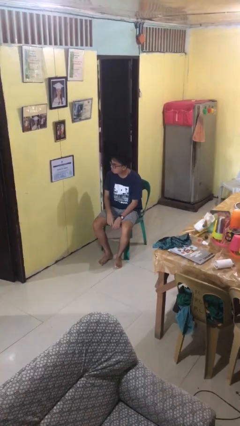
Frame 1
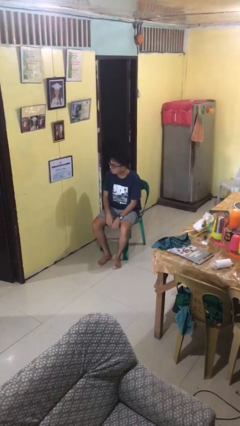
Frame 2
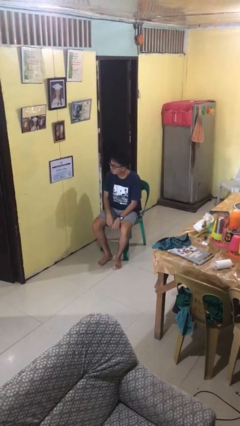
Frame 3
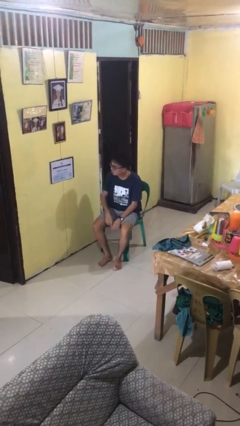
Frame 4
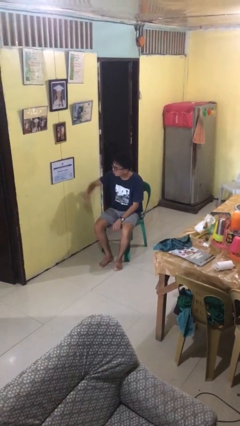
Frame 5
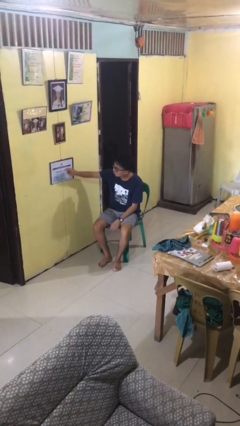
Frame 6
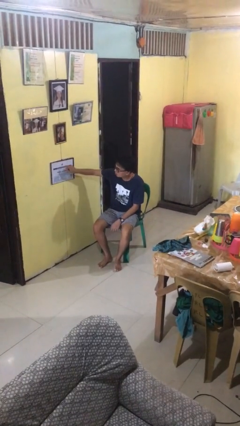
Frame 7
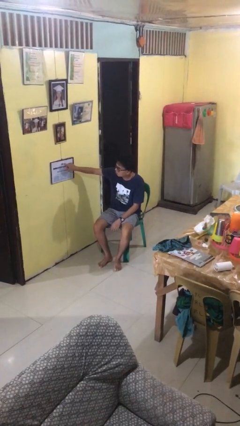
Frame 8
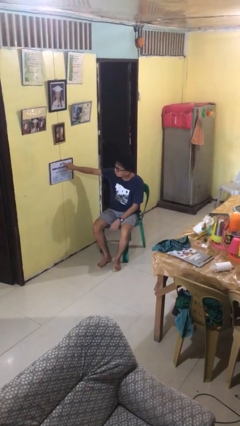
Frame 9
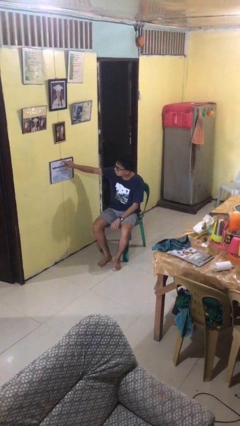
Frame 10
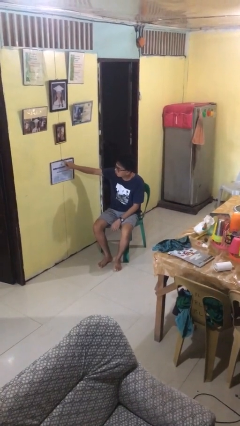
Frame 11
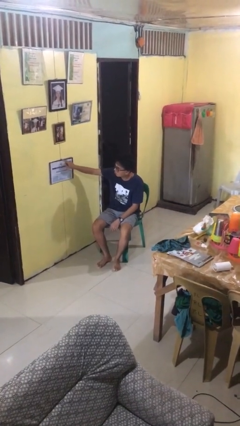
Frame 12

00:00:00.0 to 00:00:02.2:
person taps object with finger

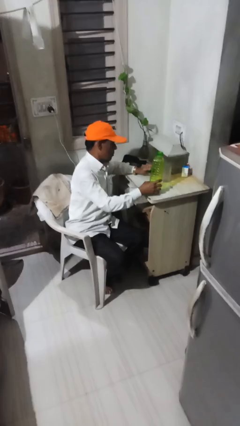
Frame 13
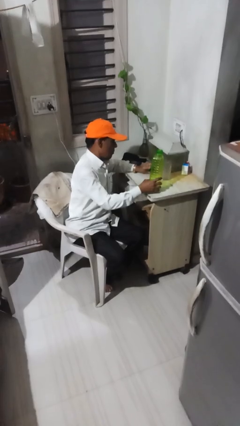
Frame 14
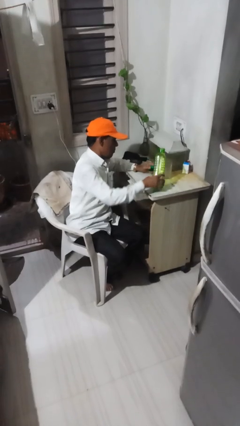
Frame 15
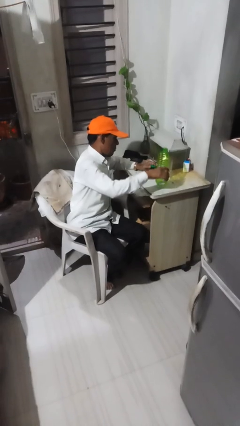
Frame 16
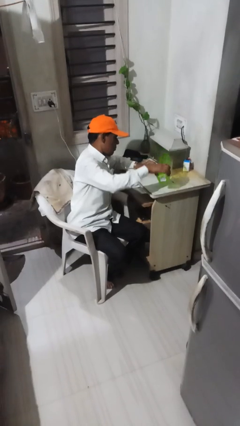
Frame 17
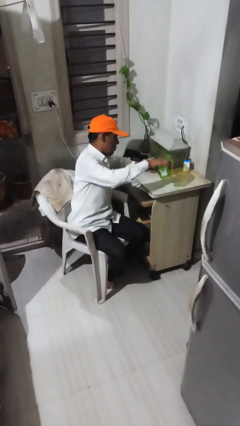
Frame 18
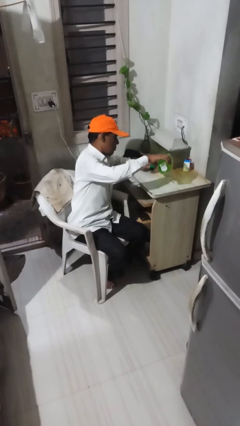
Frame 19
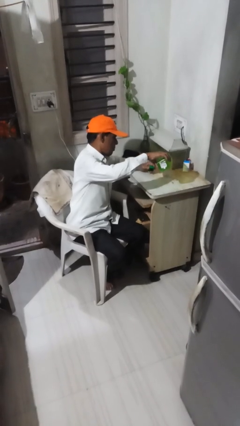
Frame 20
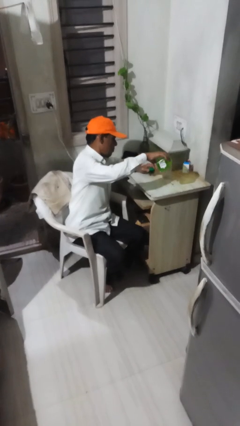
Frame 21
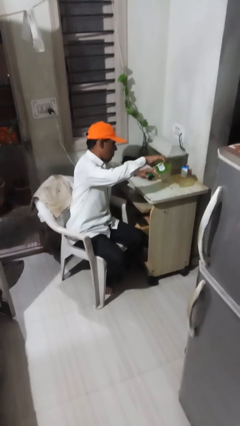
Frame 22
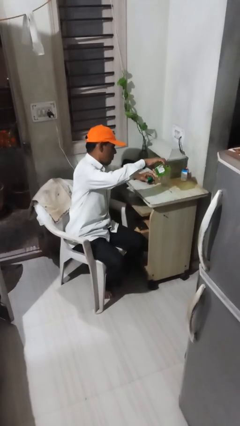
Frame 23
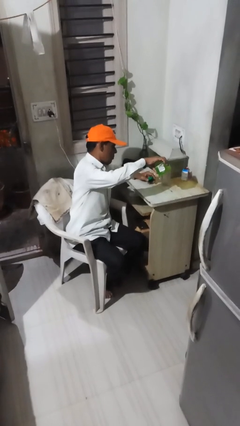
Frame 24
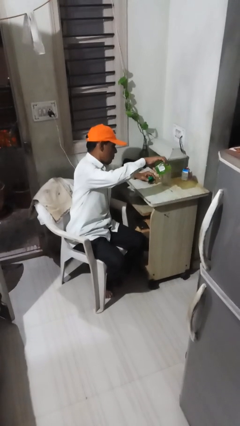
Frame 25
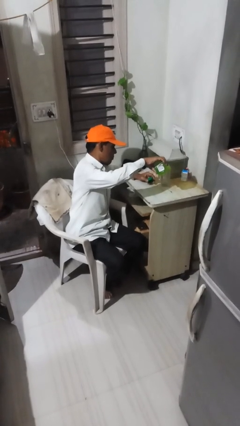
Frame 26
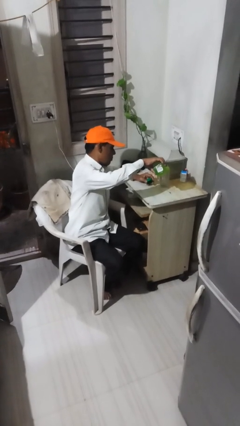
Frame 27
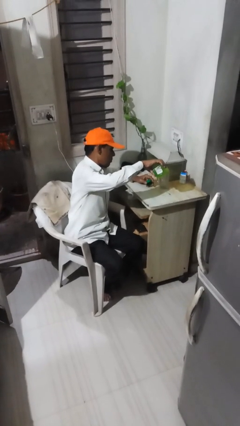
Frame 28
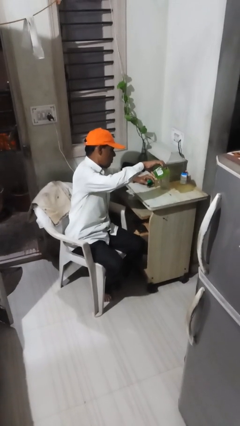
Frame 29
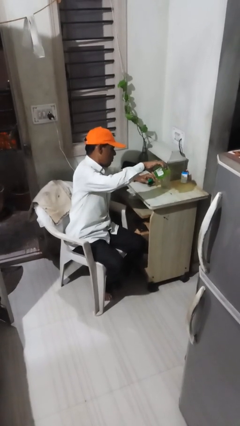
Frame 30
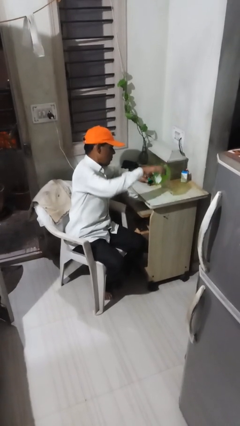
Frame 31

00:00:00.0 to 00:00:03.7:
person pours liquid into cup

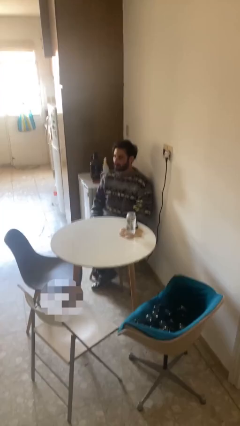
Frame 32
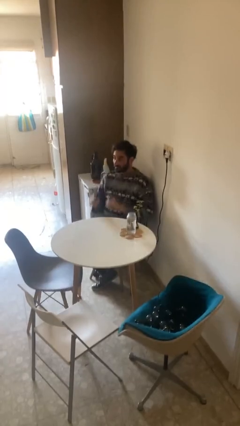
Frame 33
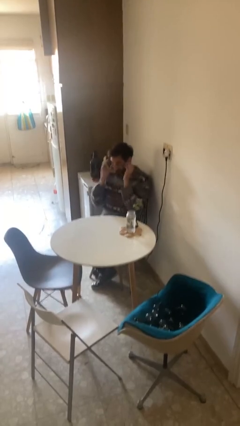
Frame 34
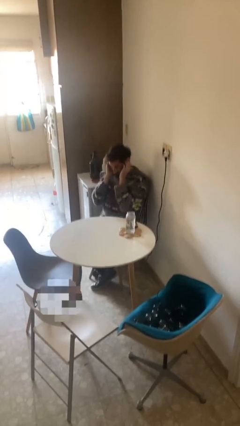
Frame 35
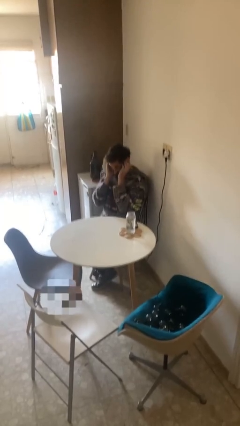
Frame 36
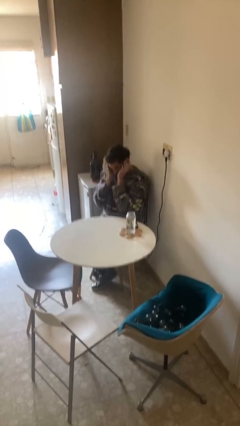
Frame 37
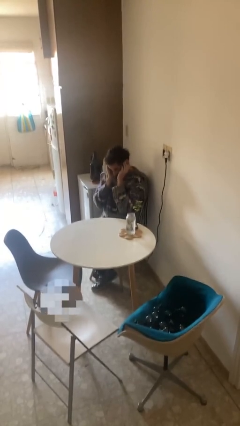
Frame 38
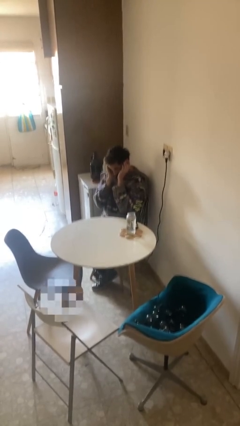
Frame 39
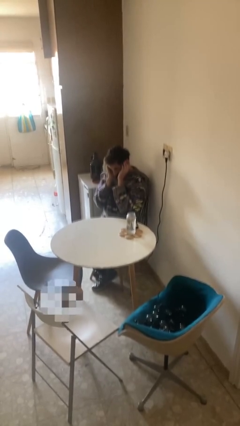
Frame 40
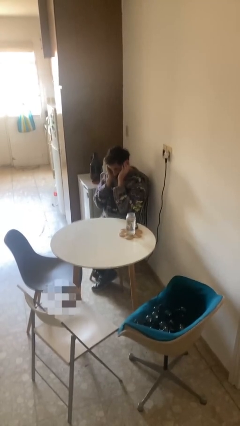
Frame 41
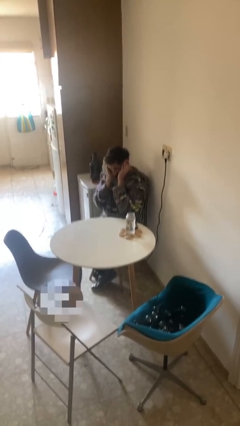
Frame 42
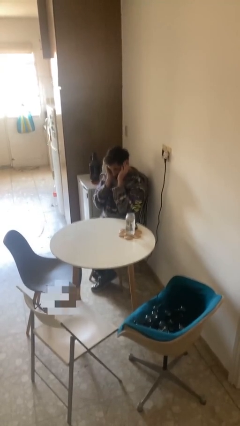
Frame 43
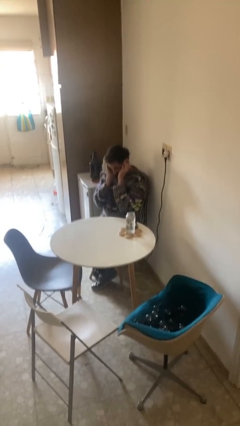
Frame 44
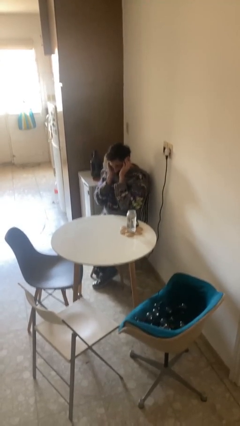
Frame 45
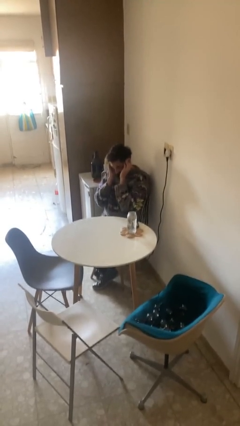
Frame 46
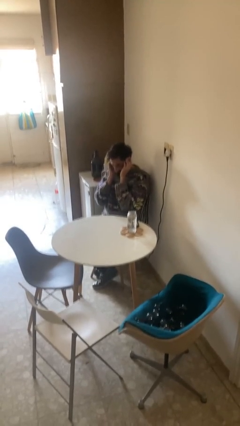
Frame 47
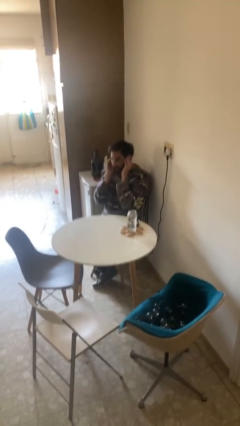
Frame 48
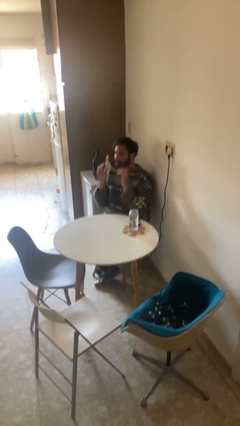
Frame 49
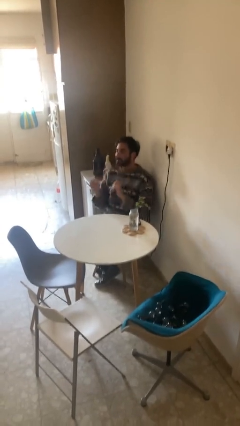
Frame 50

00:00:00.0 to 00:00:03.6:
person puts fingers in ear

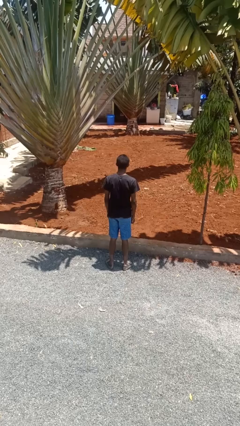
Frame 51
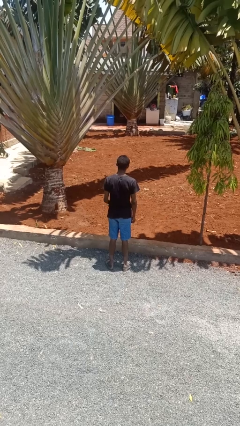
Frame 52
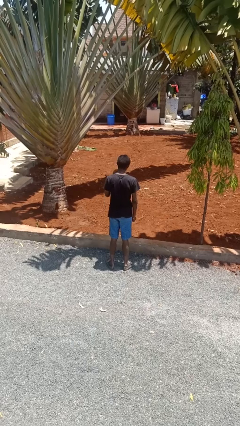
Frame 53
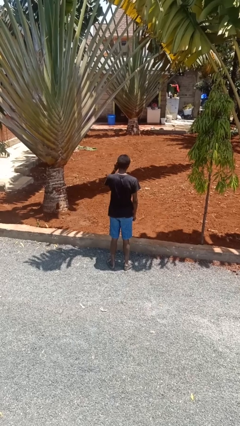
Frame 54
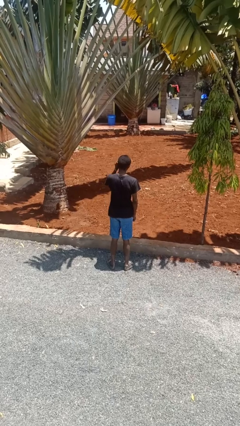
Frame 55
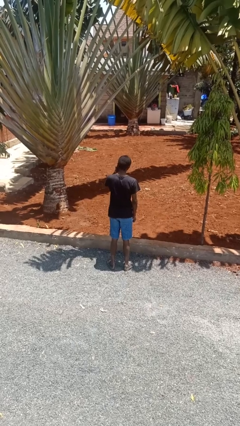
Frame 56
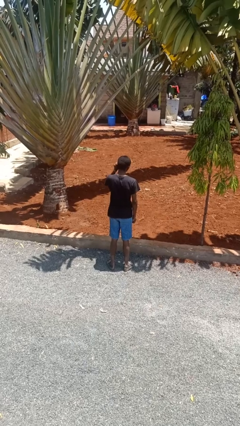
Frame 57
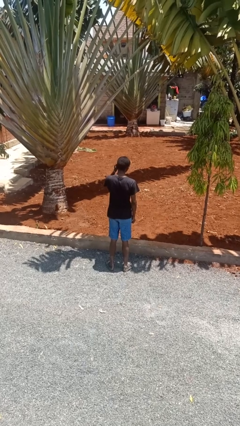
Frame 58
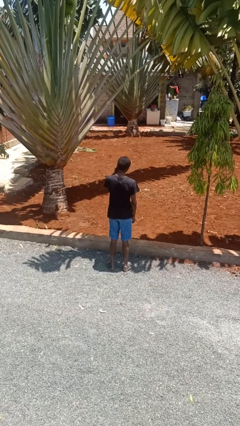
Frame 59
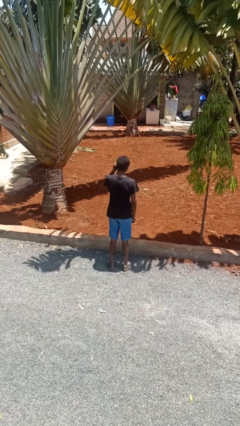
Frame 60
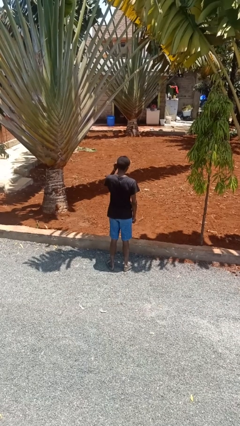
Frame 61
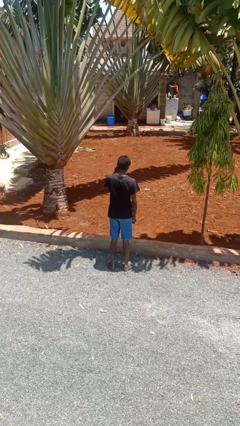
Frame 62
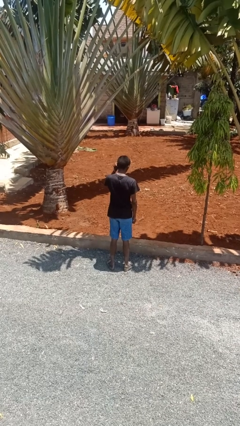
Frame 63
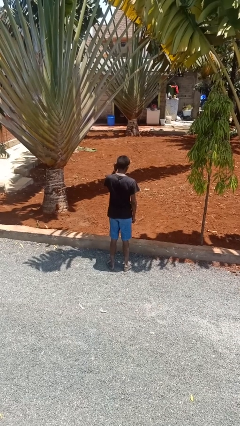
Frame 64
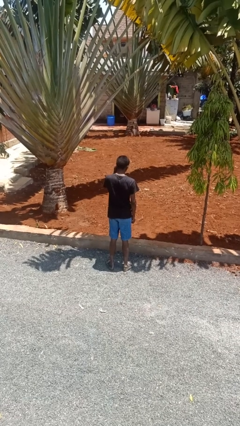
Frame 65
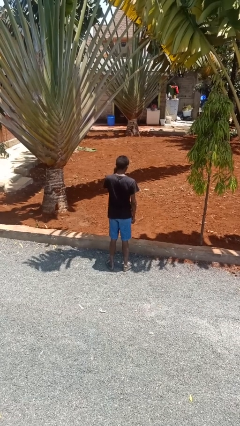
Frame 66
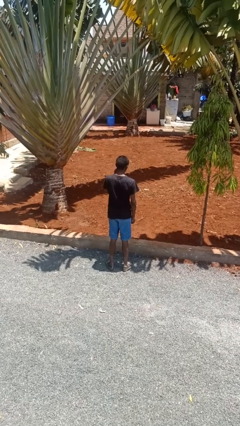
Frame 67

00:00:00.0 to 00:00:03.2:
person touches earlobe

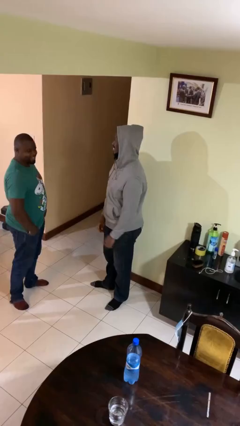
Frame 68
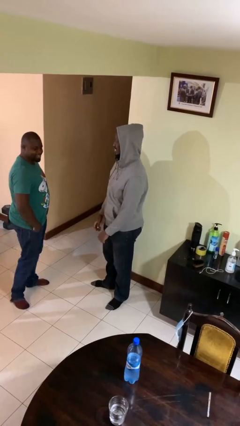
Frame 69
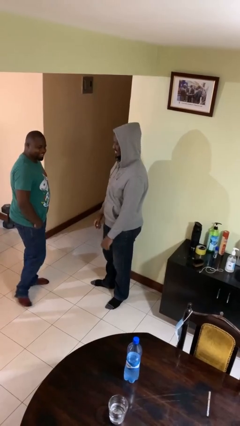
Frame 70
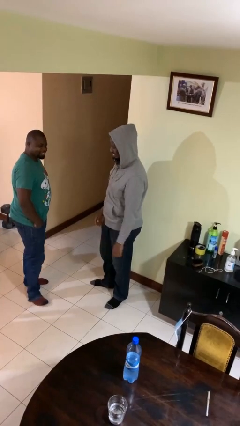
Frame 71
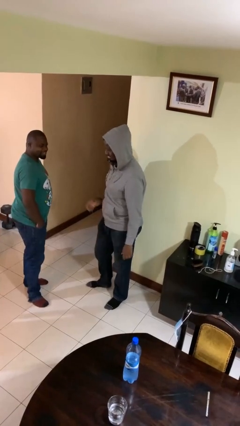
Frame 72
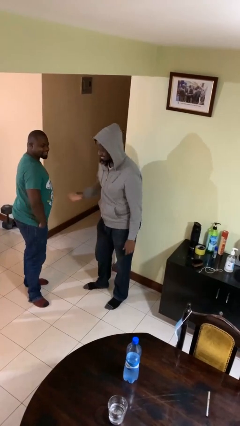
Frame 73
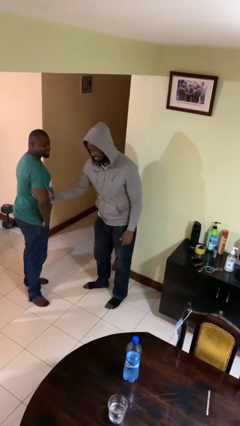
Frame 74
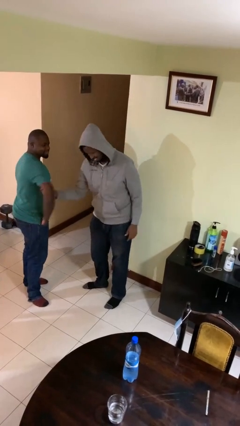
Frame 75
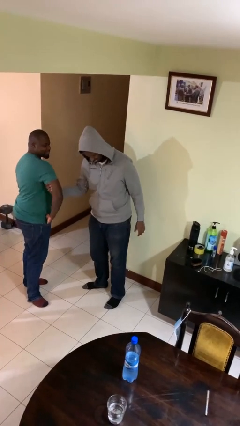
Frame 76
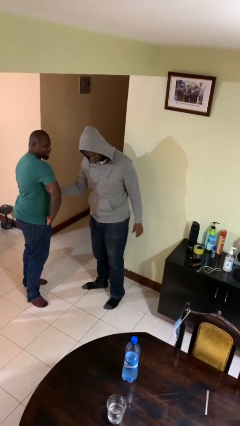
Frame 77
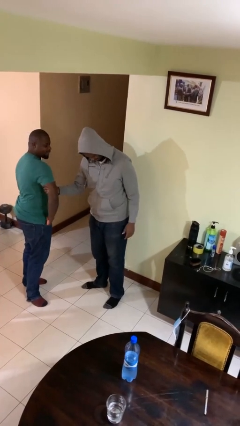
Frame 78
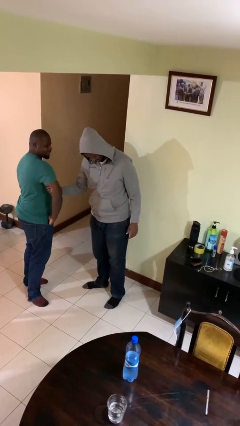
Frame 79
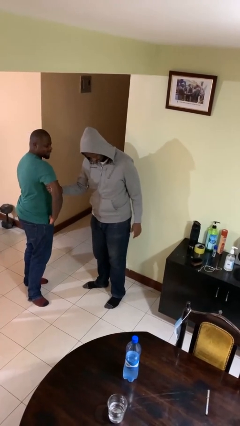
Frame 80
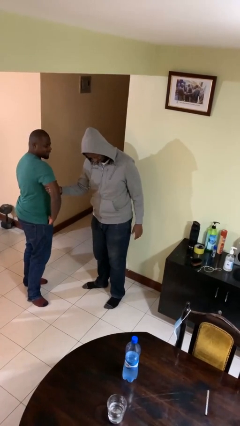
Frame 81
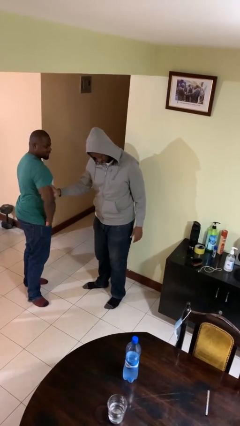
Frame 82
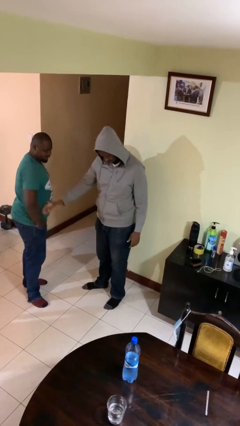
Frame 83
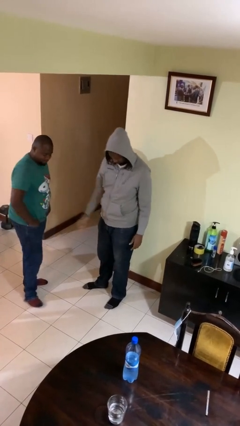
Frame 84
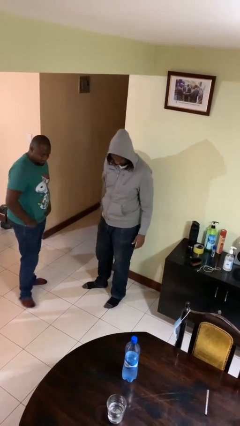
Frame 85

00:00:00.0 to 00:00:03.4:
person grabs person by bicep

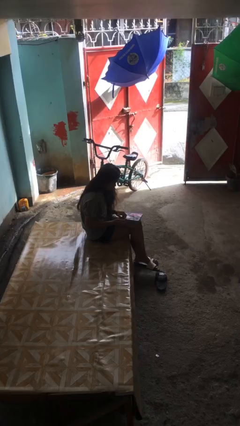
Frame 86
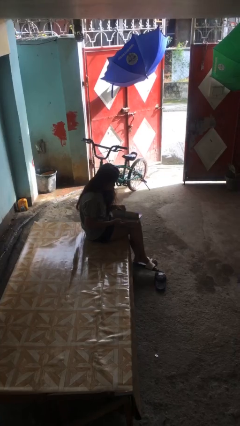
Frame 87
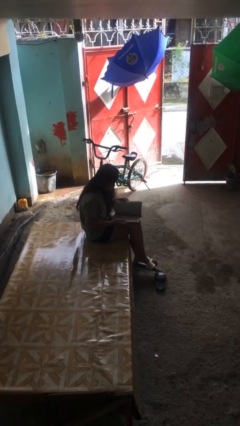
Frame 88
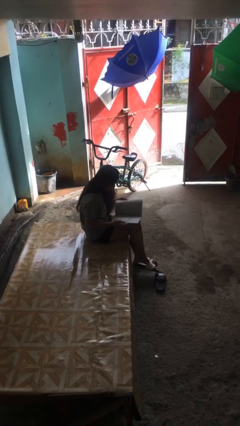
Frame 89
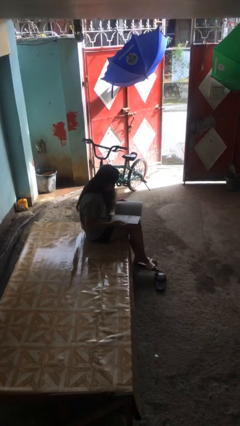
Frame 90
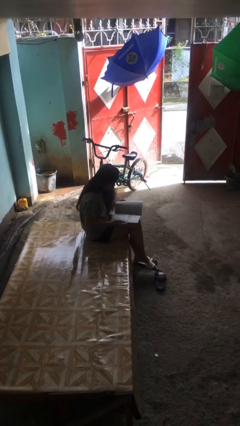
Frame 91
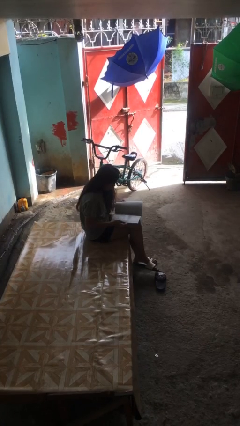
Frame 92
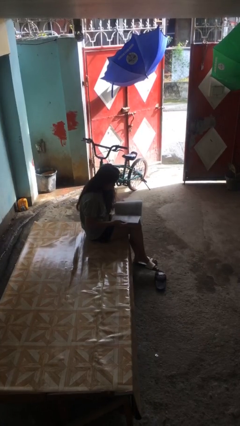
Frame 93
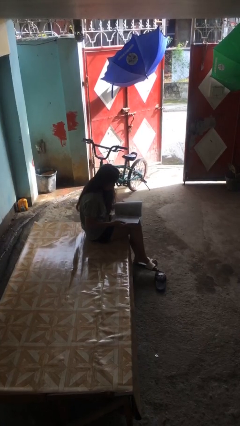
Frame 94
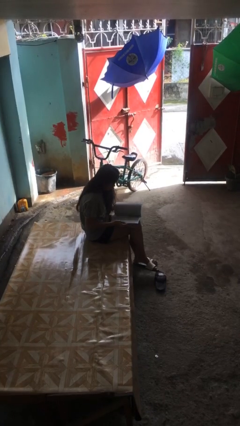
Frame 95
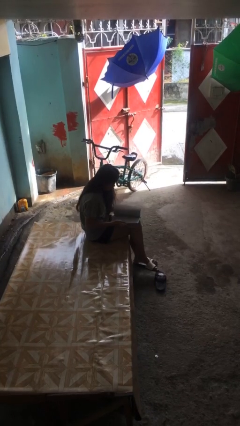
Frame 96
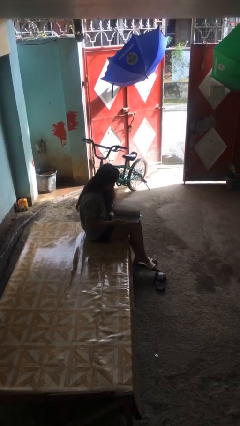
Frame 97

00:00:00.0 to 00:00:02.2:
person reads document
